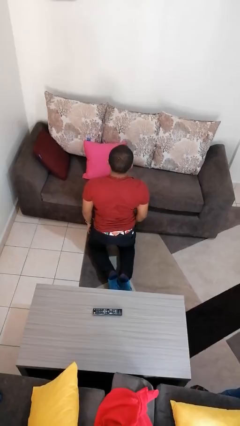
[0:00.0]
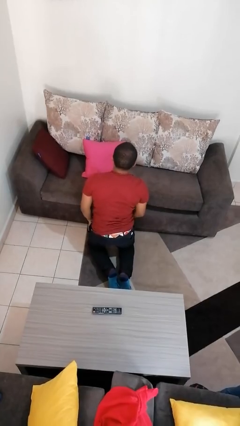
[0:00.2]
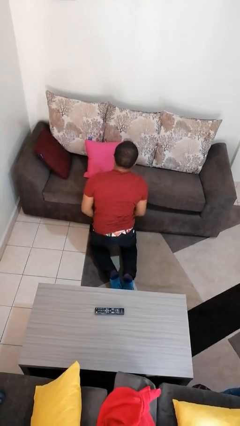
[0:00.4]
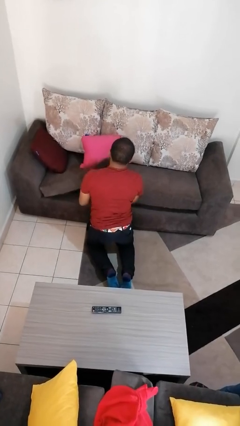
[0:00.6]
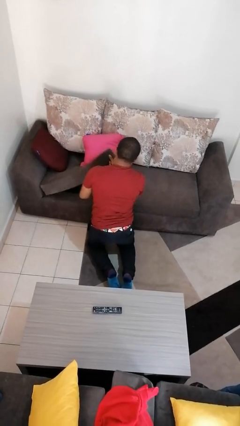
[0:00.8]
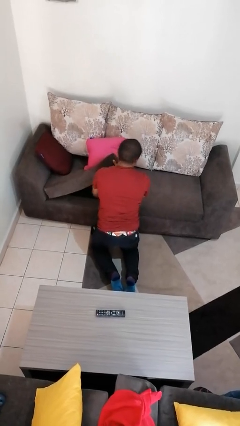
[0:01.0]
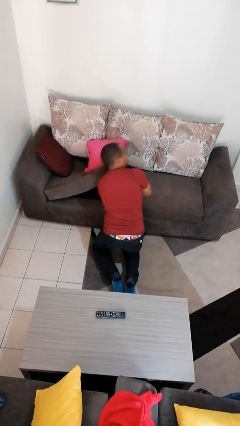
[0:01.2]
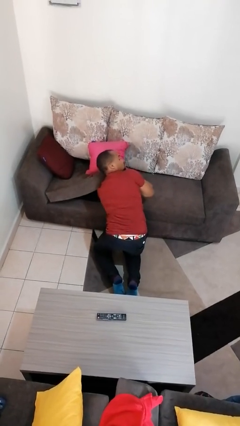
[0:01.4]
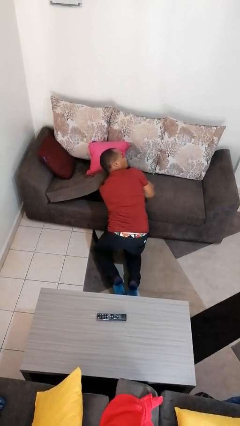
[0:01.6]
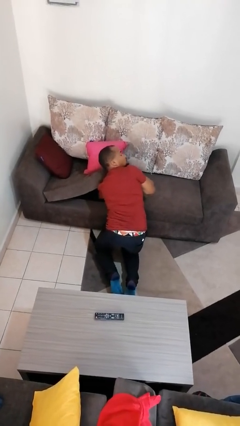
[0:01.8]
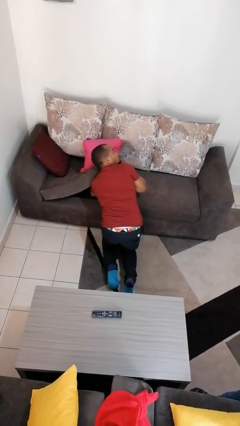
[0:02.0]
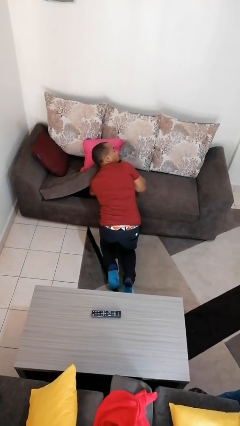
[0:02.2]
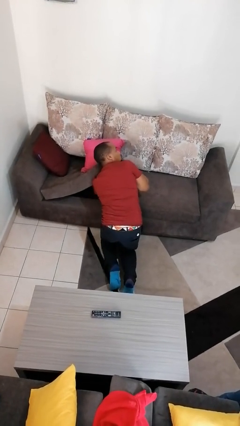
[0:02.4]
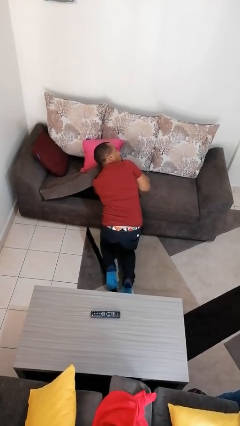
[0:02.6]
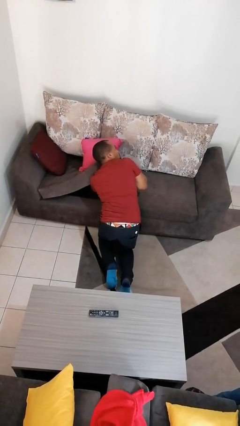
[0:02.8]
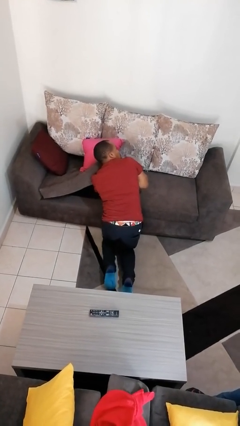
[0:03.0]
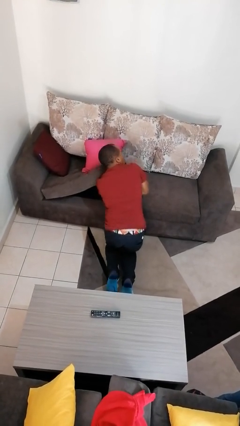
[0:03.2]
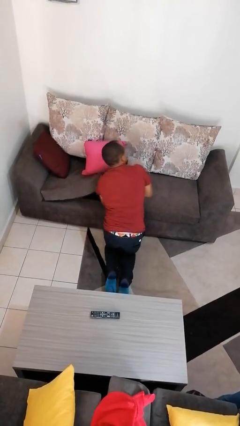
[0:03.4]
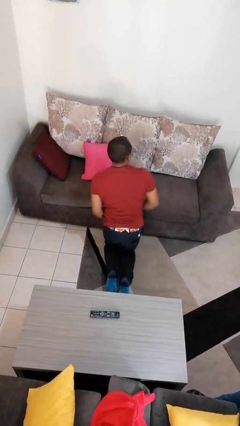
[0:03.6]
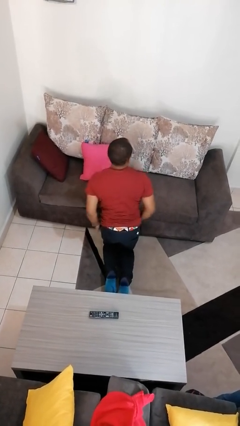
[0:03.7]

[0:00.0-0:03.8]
person searches under couch

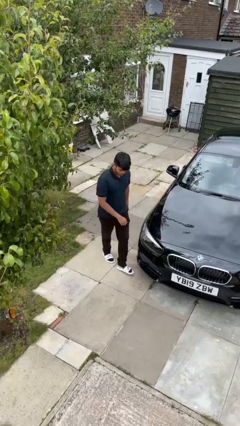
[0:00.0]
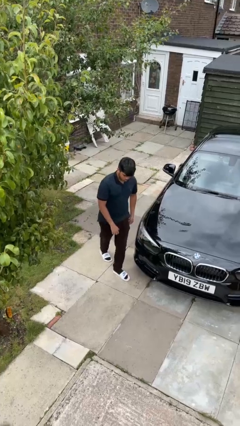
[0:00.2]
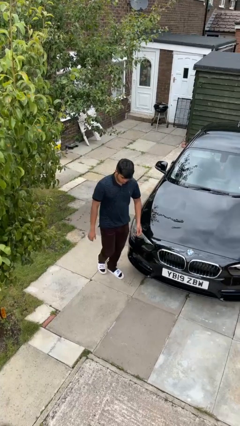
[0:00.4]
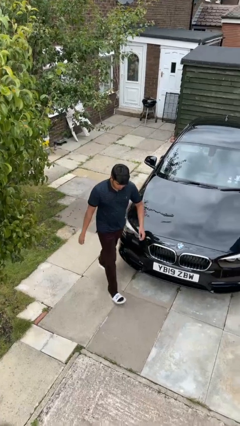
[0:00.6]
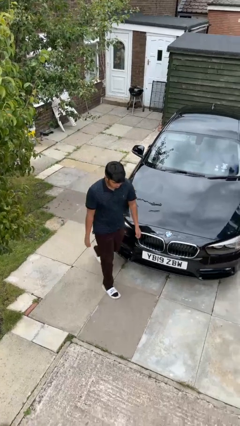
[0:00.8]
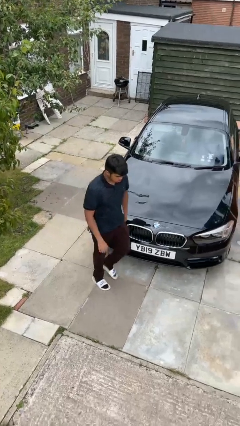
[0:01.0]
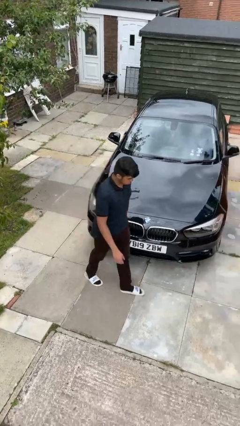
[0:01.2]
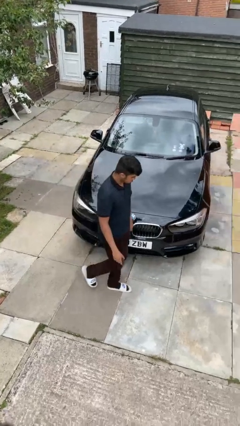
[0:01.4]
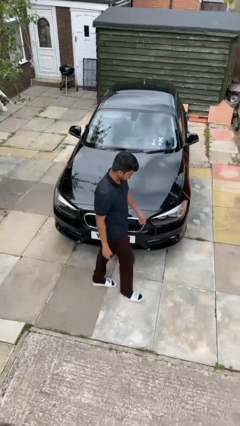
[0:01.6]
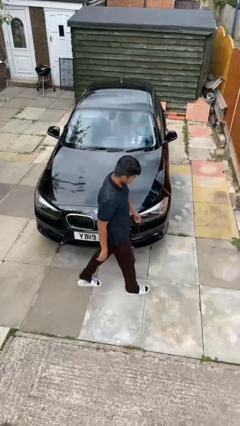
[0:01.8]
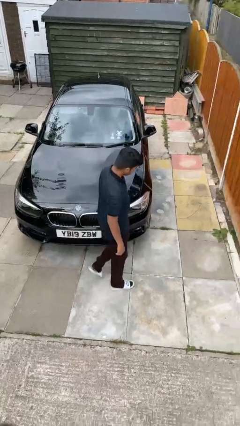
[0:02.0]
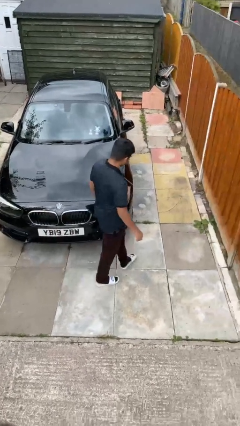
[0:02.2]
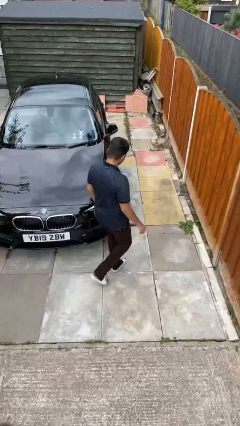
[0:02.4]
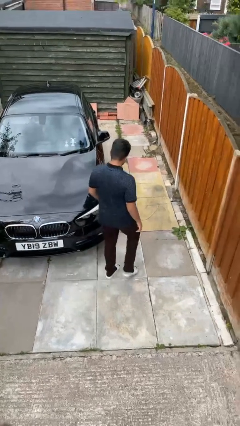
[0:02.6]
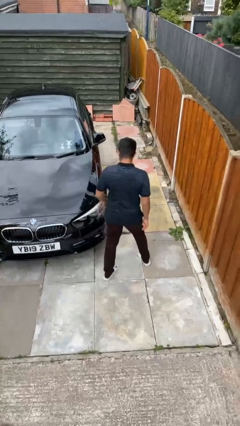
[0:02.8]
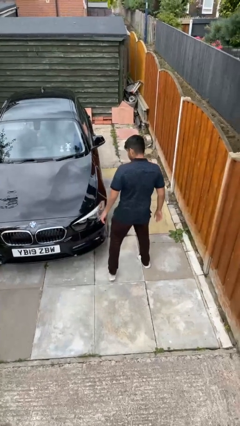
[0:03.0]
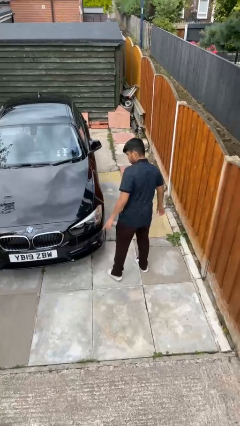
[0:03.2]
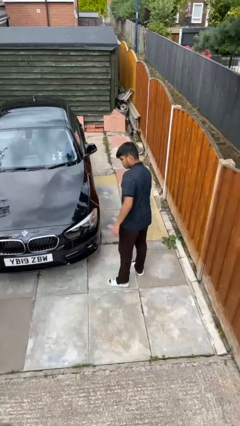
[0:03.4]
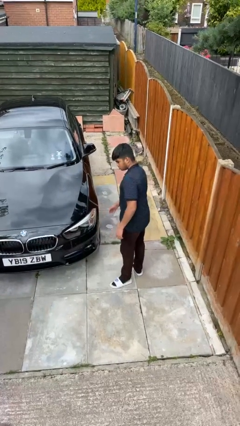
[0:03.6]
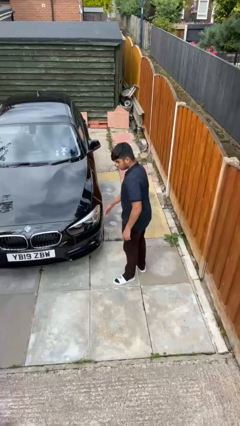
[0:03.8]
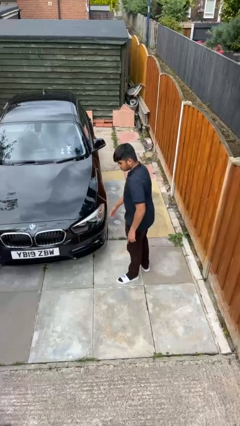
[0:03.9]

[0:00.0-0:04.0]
person walks around car

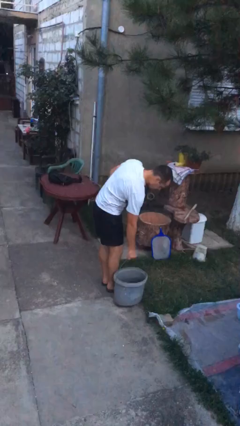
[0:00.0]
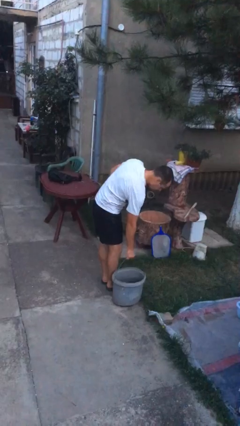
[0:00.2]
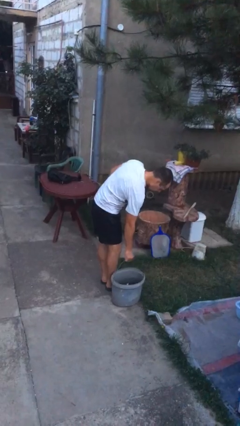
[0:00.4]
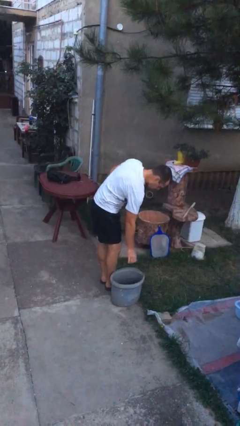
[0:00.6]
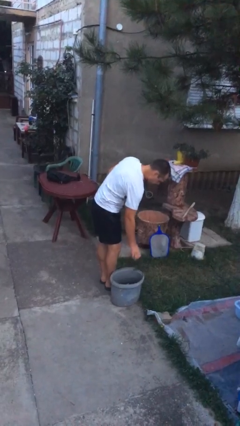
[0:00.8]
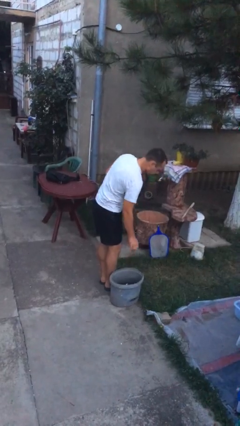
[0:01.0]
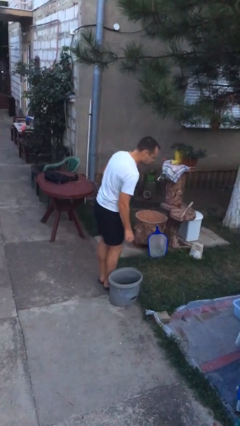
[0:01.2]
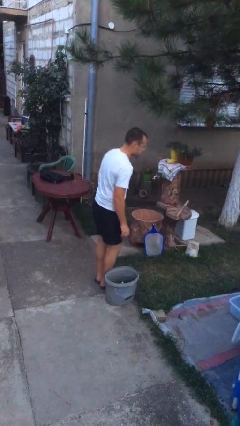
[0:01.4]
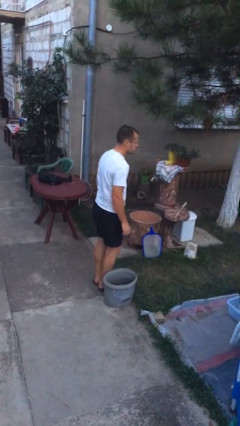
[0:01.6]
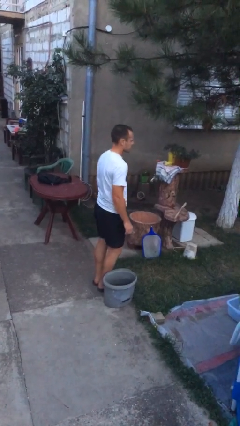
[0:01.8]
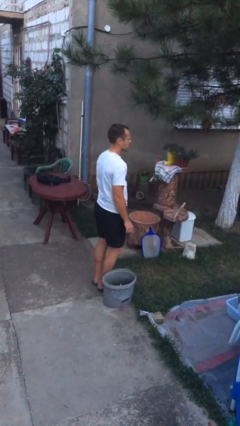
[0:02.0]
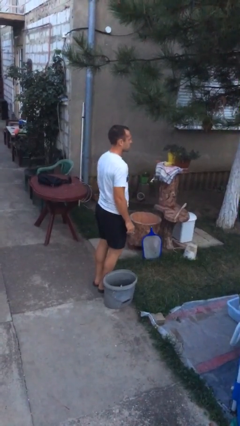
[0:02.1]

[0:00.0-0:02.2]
person puts down object on floor

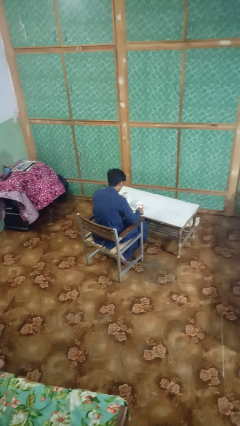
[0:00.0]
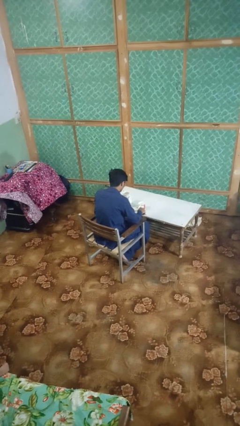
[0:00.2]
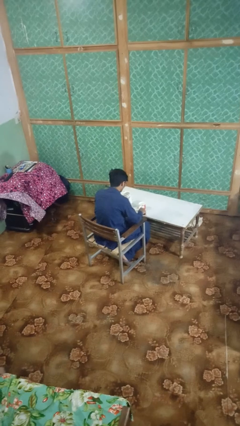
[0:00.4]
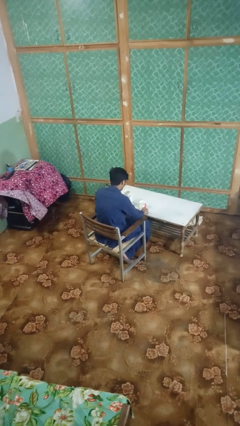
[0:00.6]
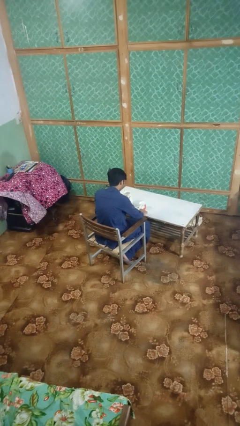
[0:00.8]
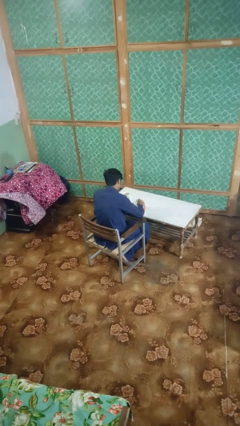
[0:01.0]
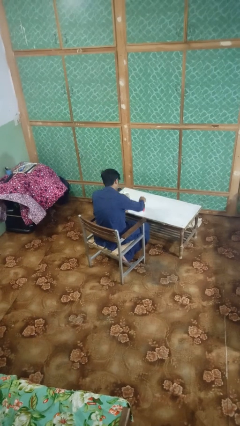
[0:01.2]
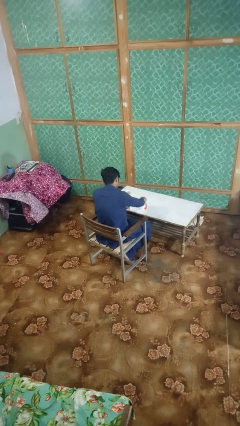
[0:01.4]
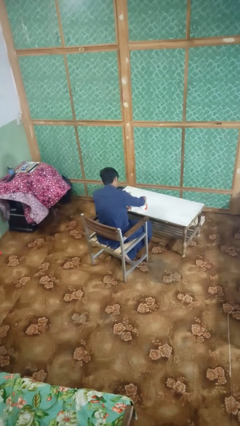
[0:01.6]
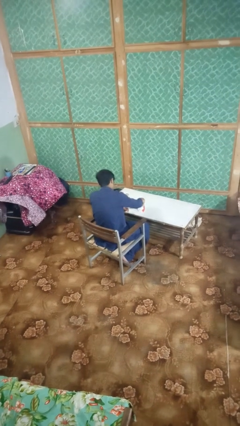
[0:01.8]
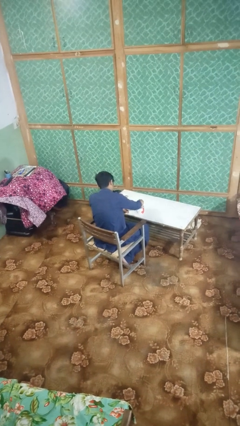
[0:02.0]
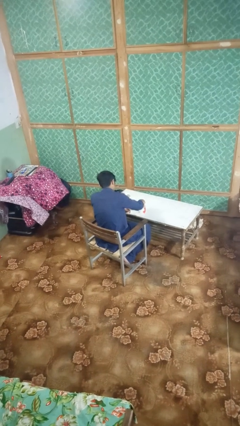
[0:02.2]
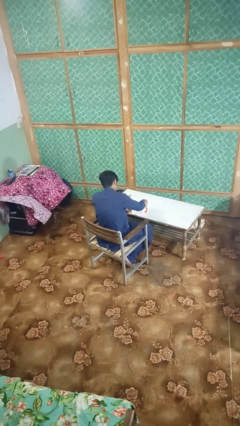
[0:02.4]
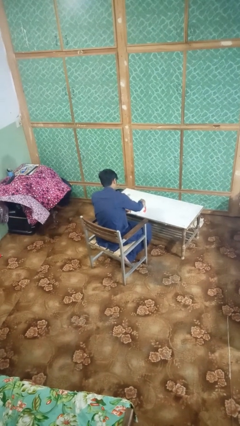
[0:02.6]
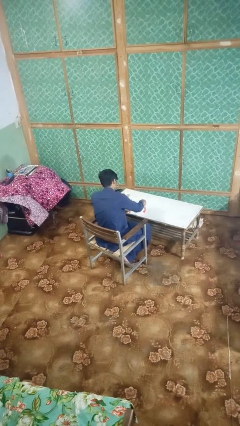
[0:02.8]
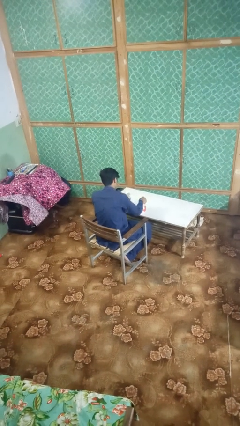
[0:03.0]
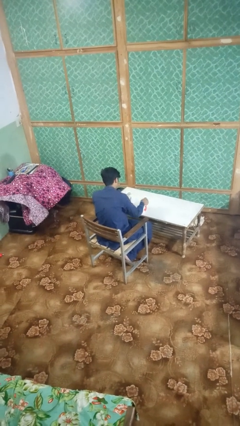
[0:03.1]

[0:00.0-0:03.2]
person stirs mug

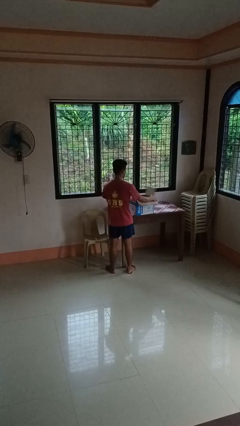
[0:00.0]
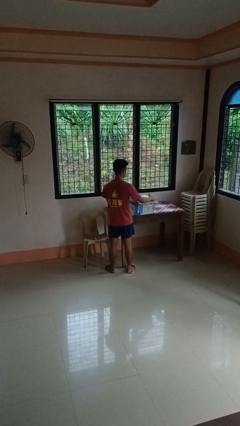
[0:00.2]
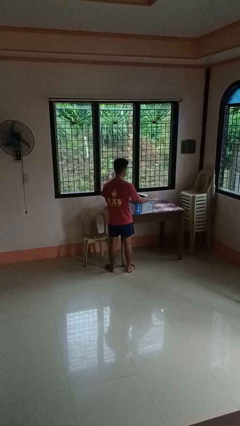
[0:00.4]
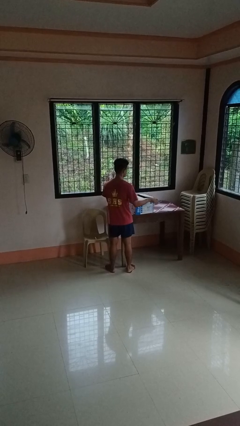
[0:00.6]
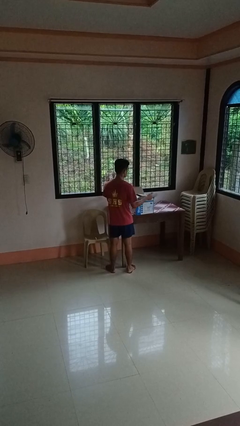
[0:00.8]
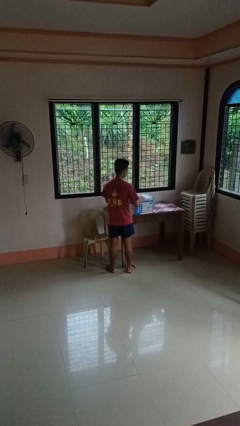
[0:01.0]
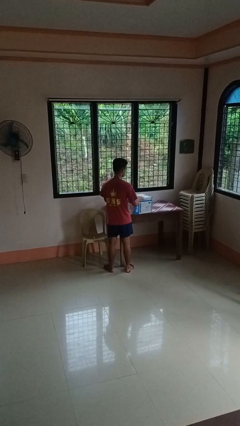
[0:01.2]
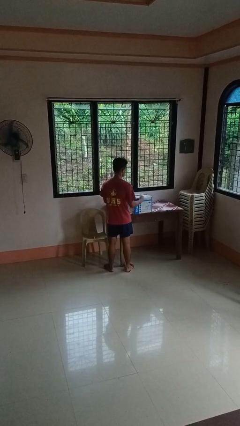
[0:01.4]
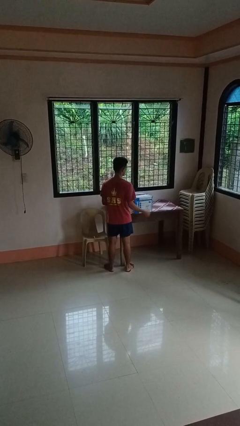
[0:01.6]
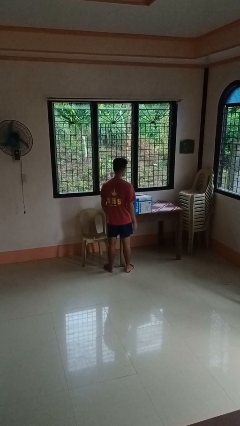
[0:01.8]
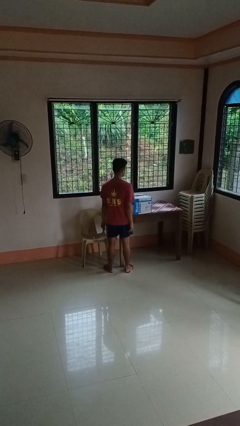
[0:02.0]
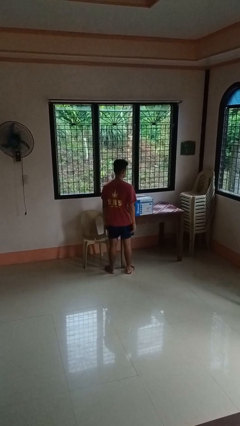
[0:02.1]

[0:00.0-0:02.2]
person closes box

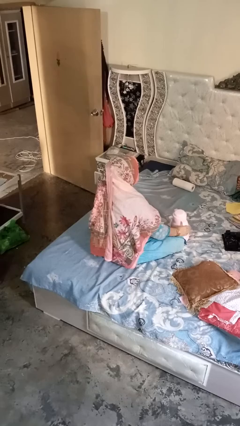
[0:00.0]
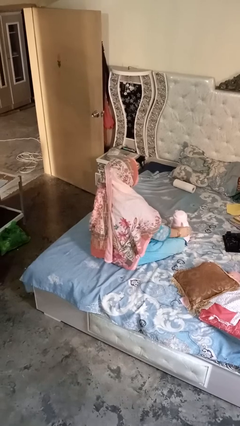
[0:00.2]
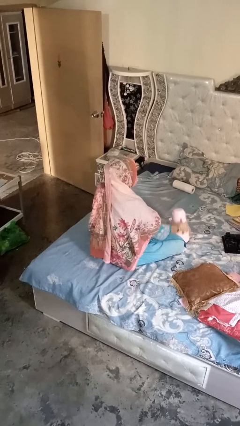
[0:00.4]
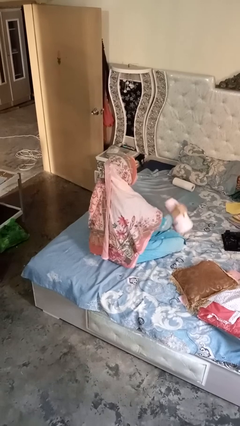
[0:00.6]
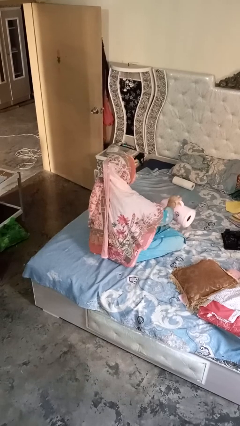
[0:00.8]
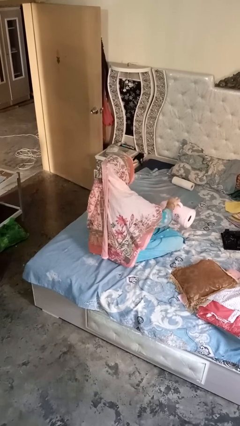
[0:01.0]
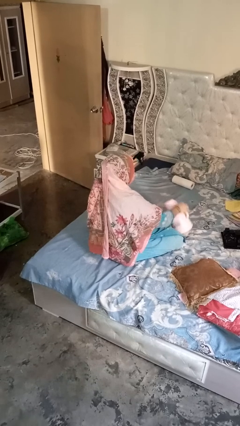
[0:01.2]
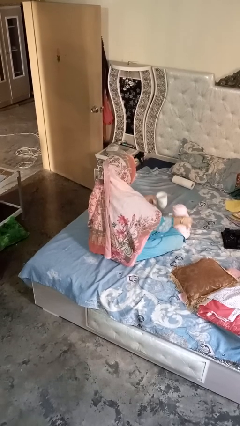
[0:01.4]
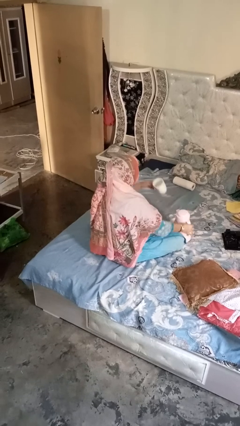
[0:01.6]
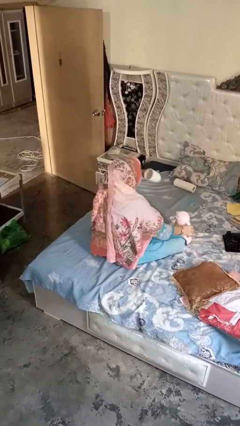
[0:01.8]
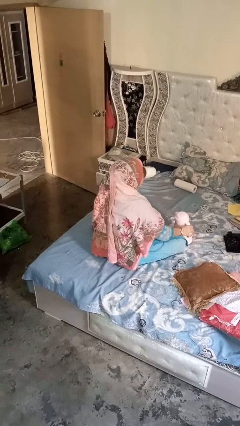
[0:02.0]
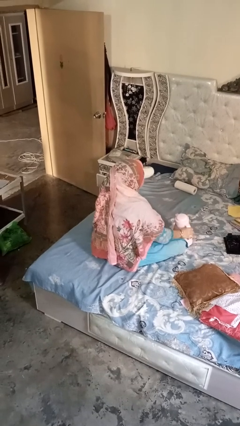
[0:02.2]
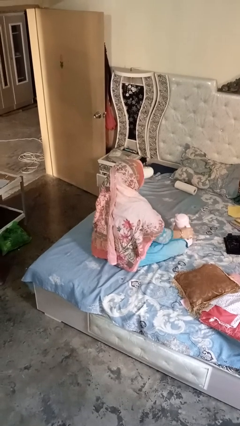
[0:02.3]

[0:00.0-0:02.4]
person pours coffee into mug
